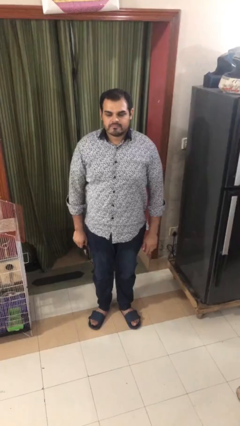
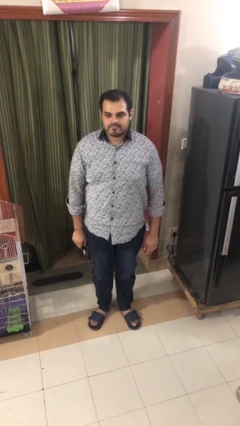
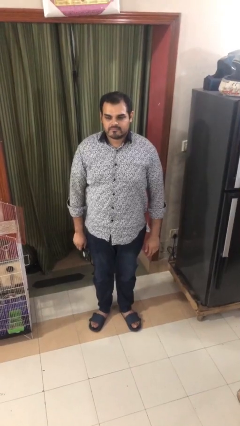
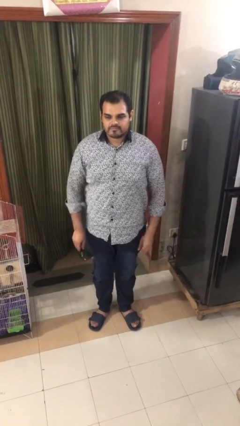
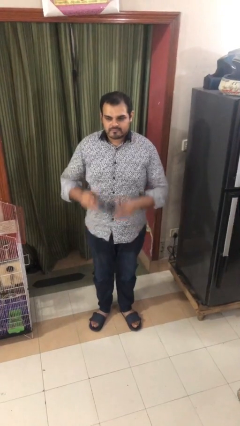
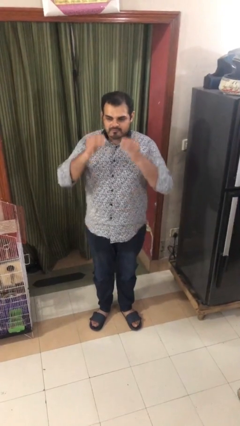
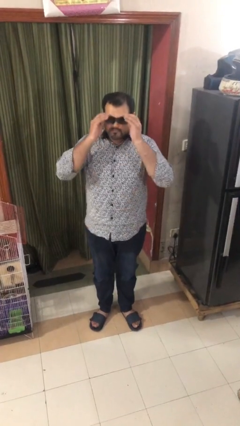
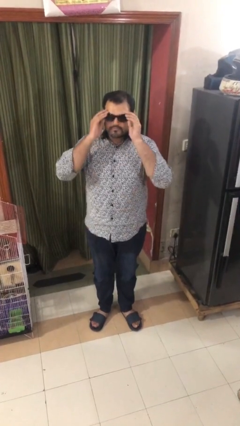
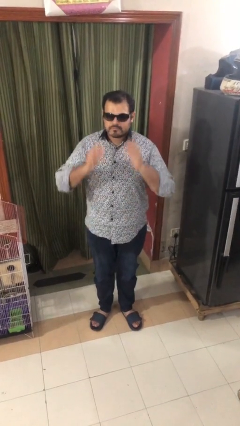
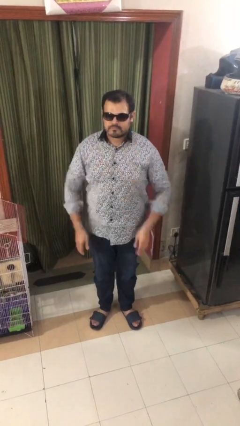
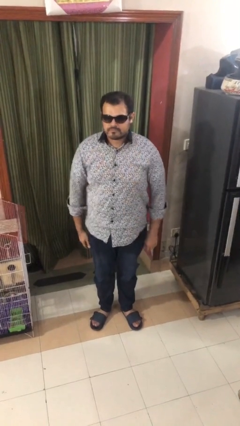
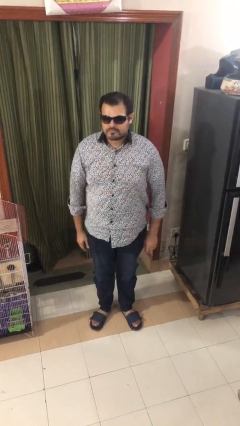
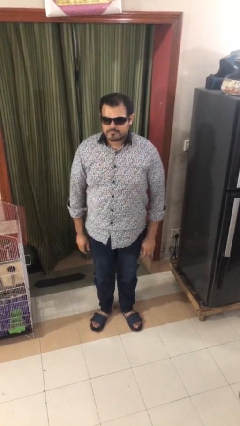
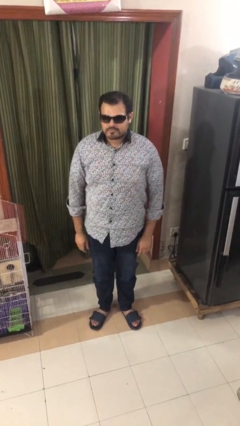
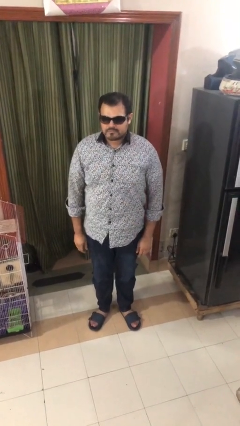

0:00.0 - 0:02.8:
person puts on sunglasses

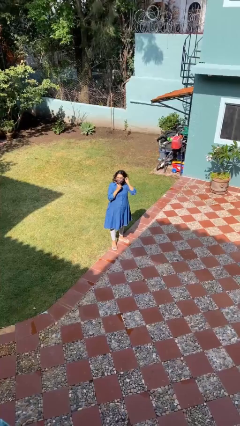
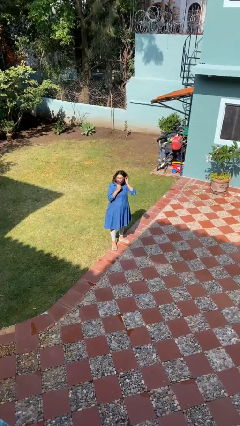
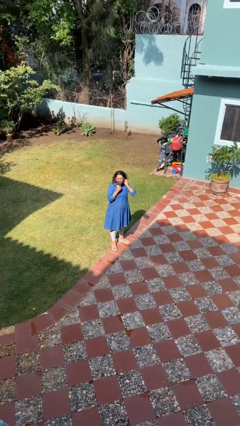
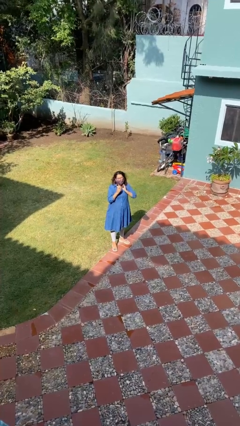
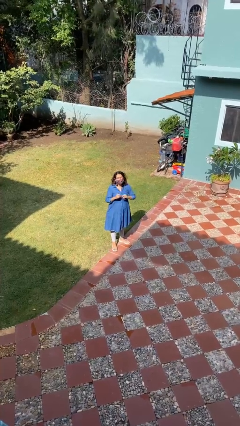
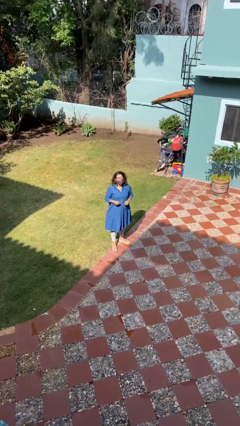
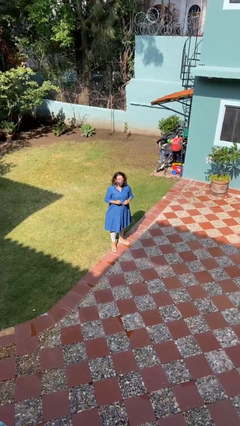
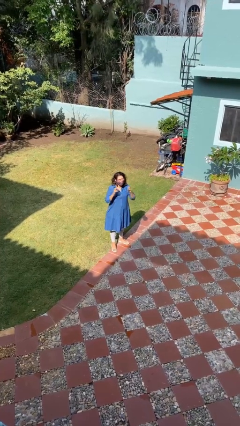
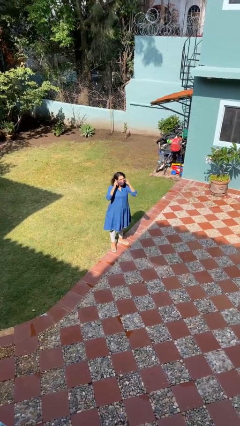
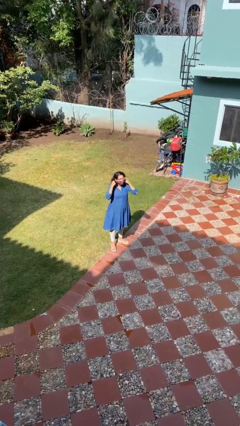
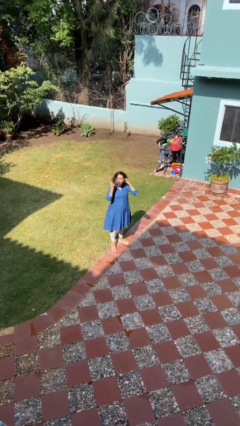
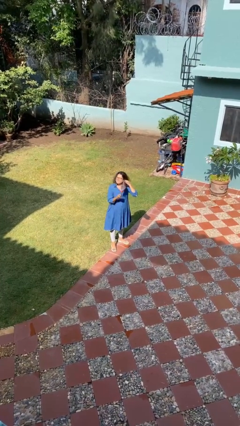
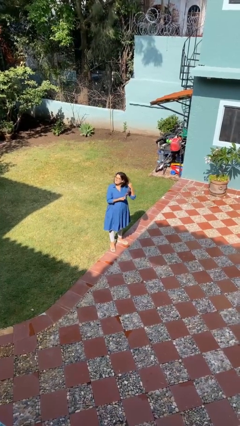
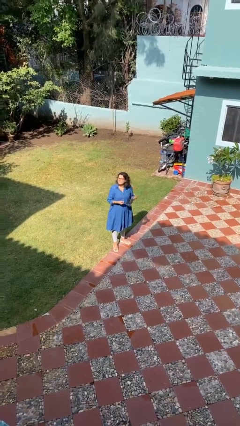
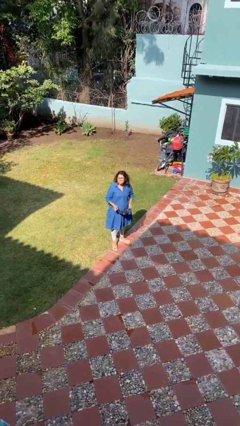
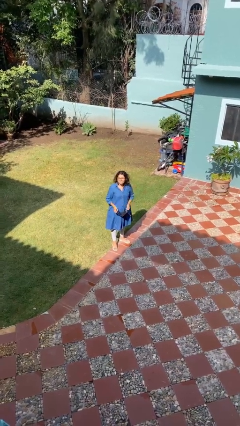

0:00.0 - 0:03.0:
person takes off facemask

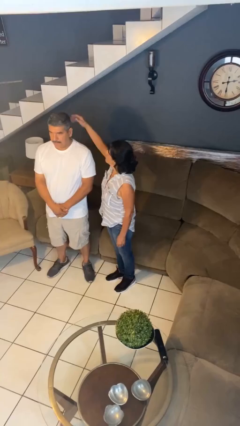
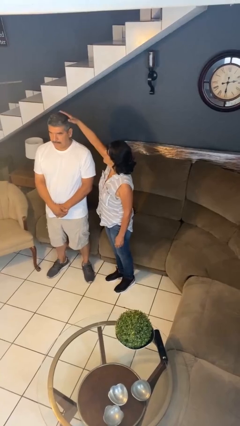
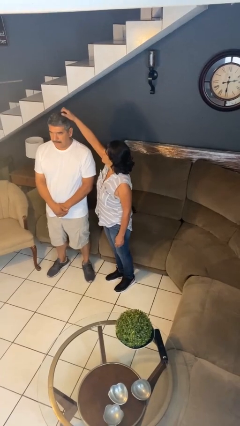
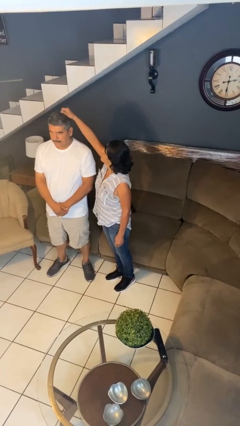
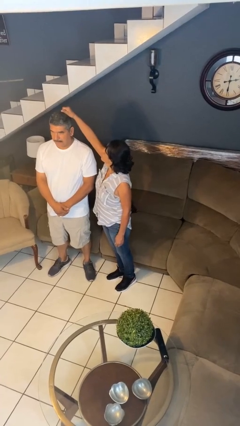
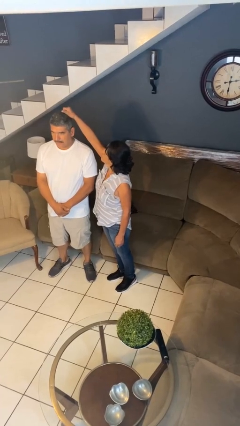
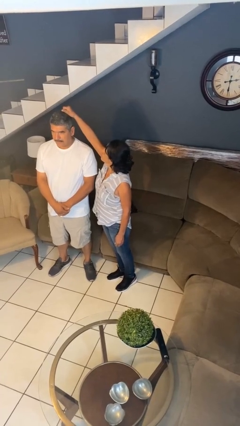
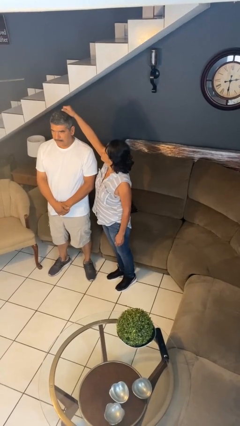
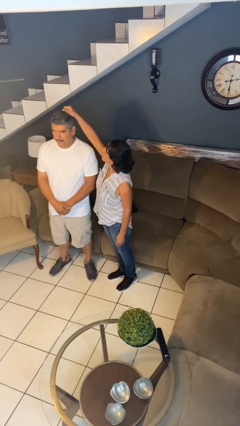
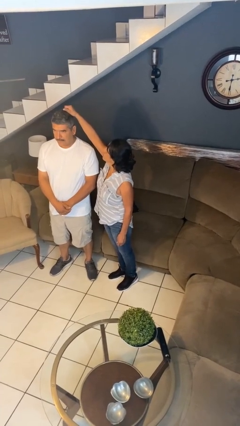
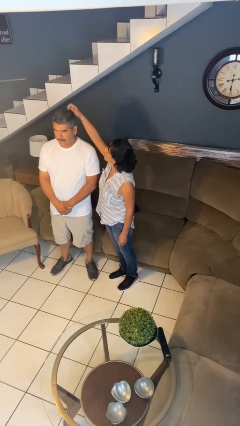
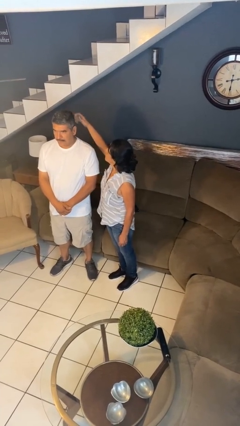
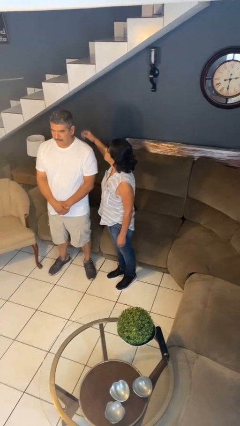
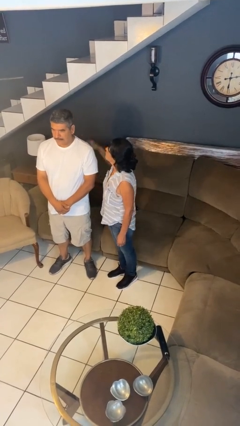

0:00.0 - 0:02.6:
person grabs person by hair

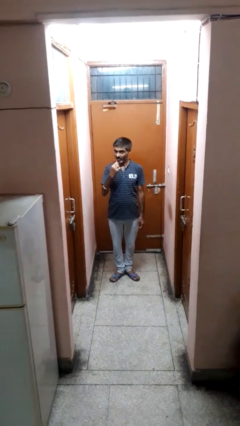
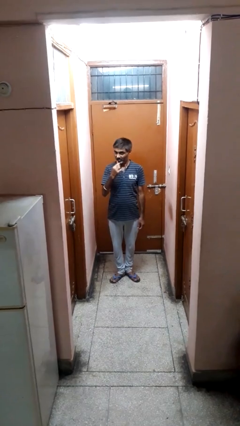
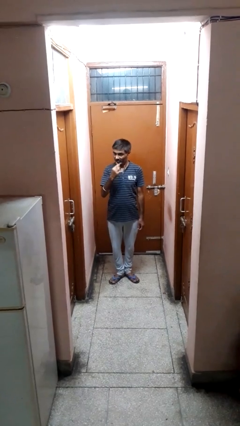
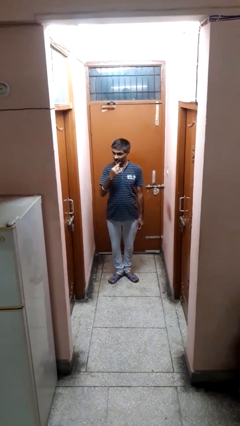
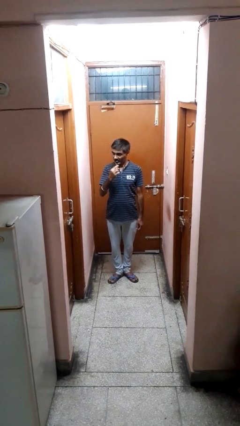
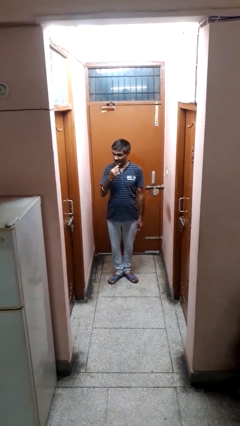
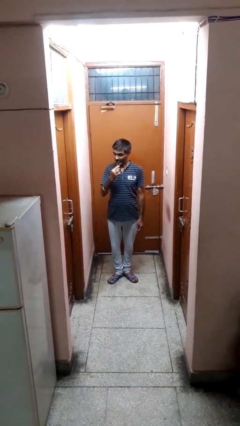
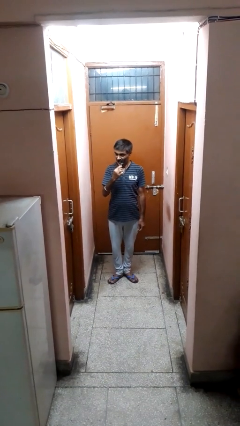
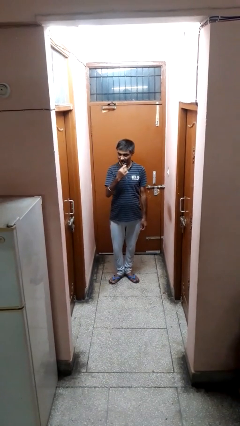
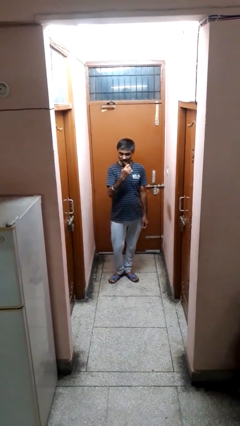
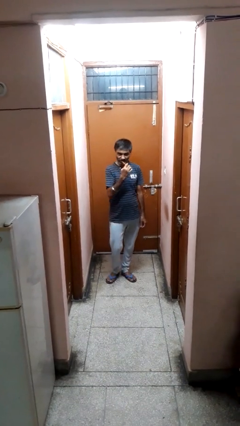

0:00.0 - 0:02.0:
person brushes teeth

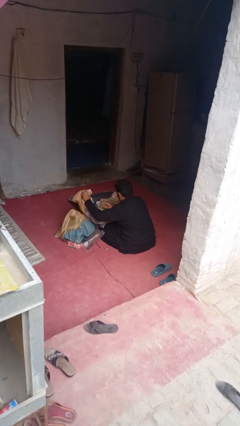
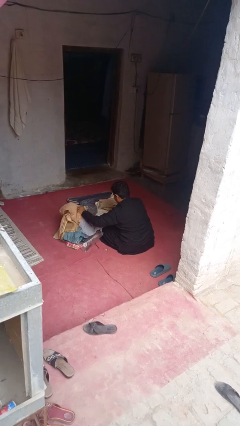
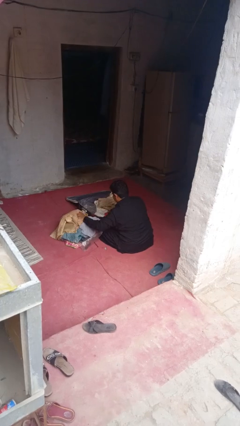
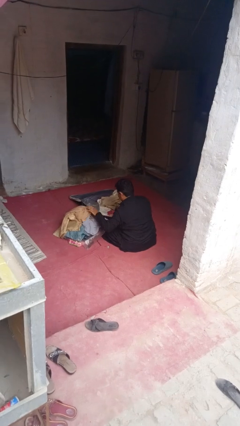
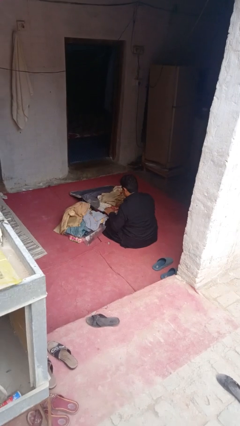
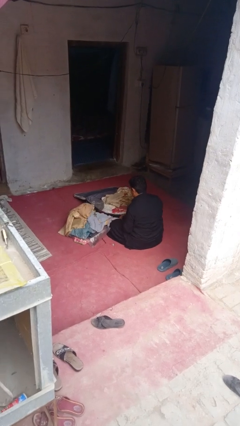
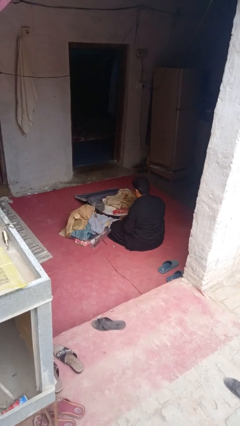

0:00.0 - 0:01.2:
person unloads clothes from suitcase

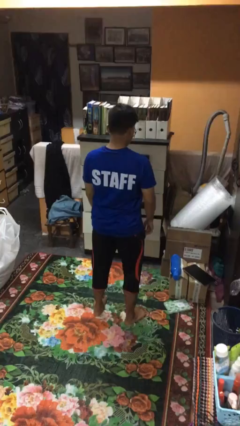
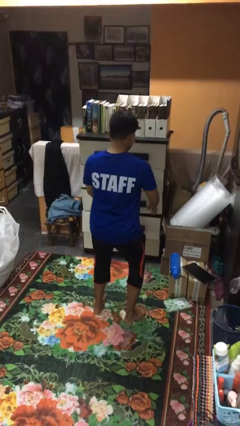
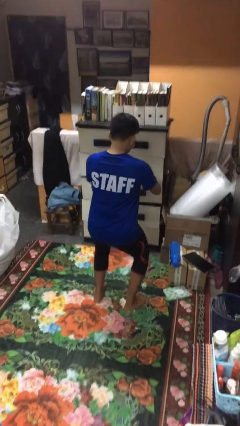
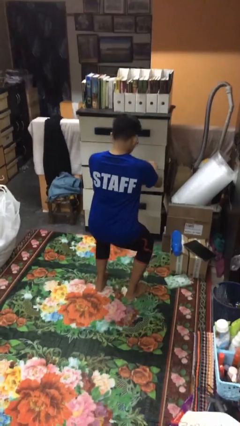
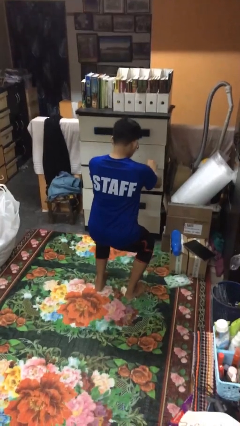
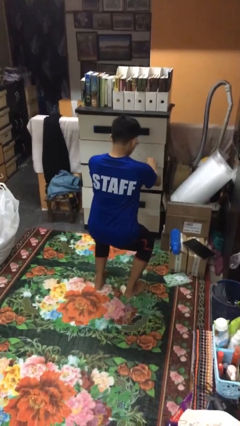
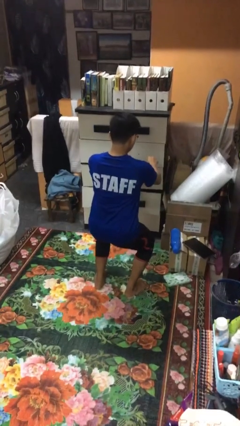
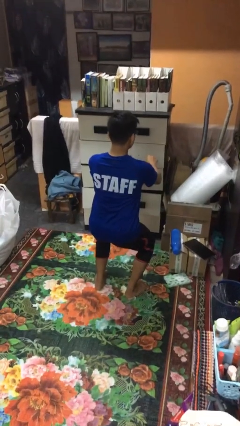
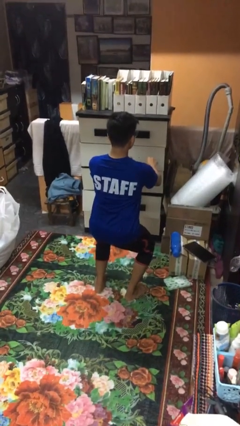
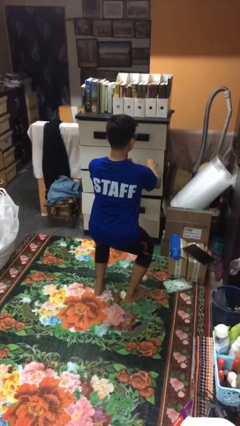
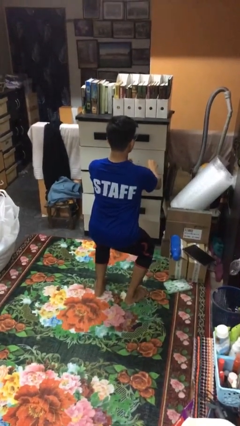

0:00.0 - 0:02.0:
person squats

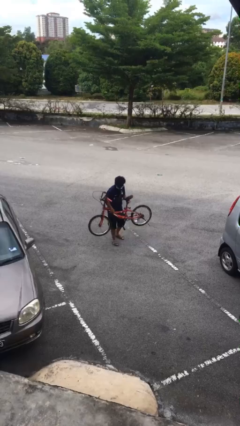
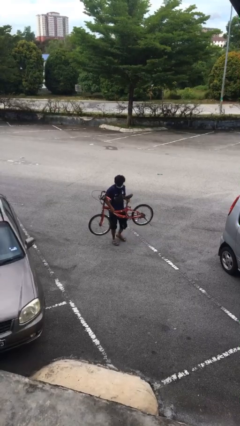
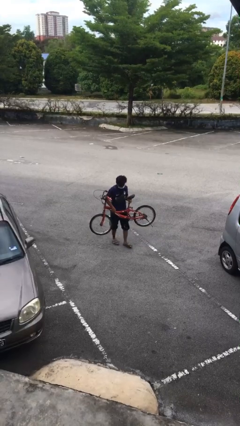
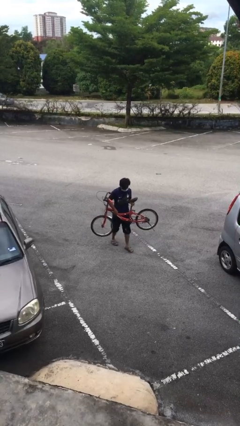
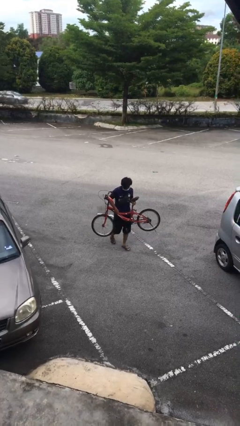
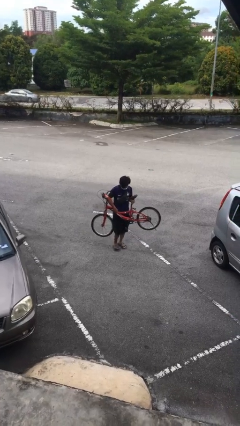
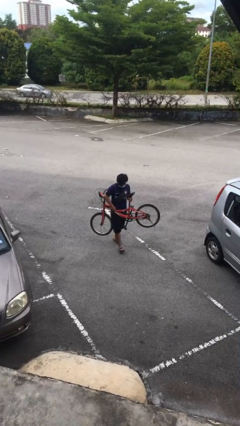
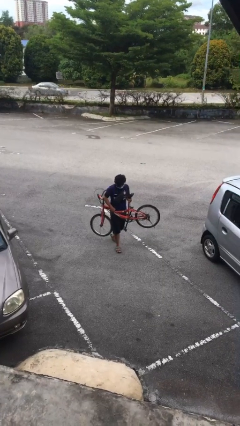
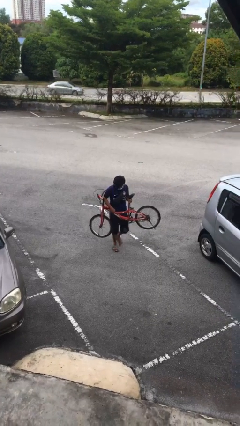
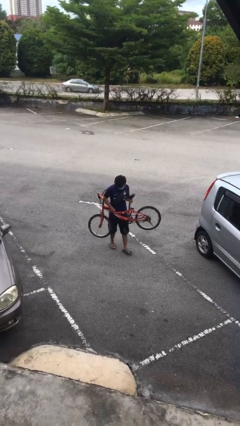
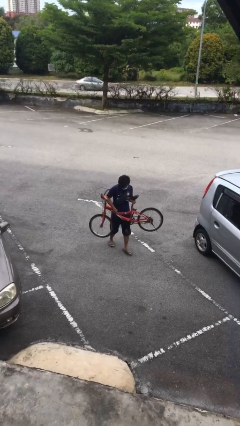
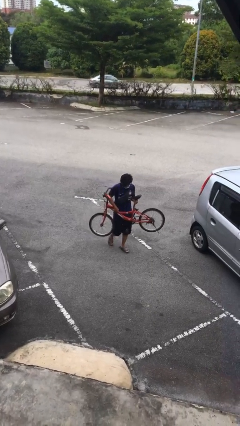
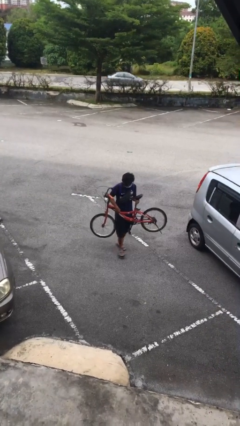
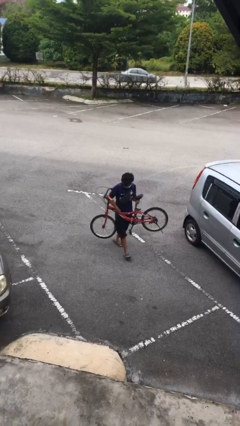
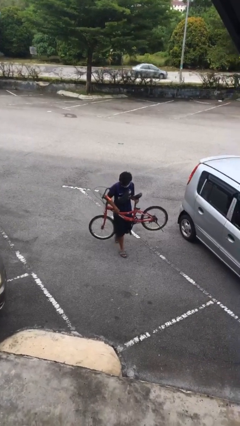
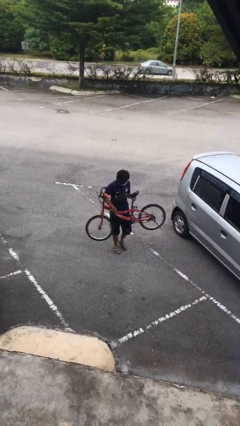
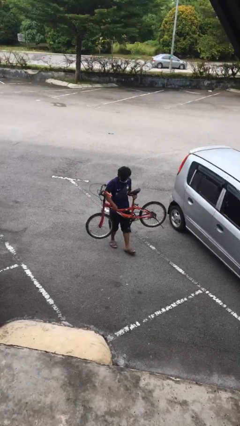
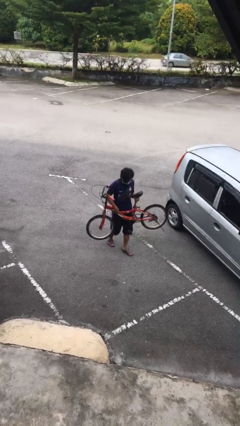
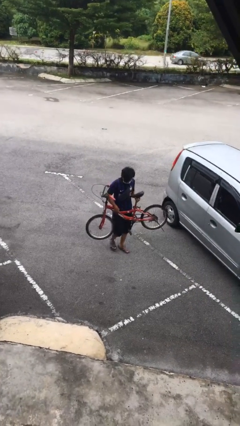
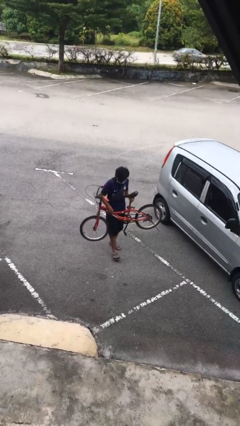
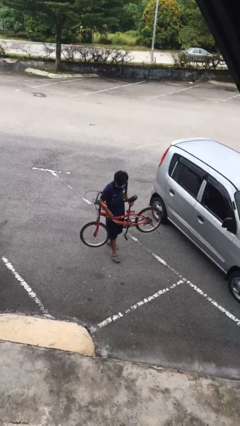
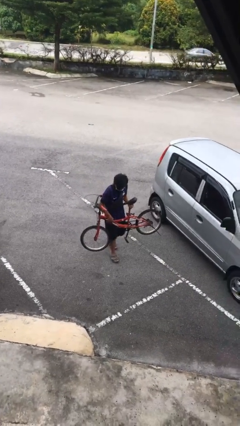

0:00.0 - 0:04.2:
person carries heavy object
